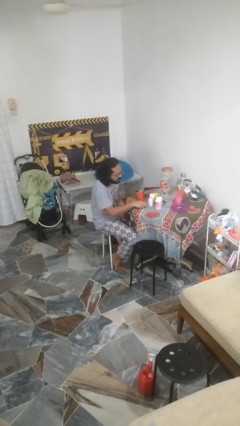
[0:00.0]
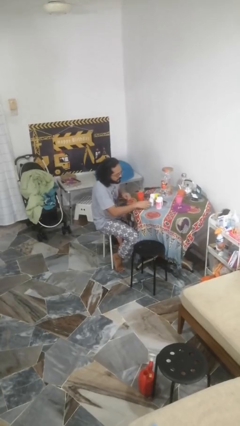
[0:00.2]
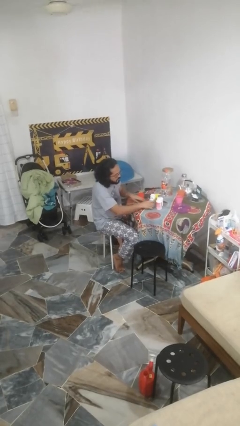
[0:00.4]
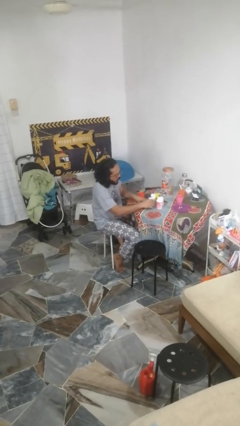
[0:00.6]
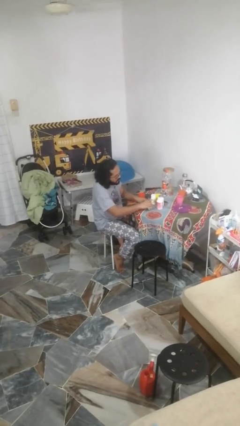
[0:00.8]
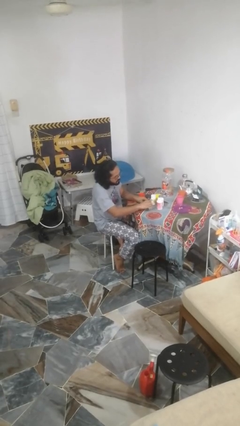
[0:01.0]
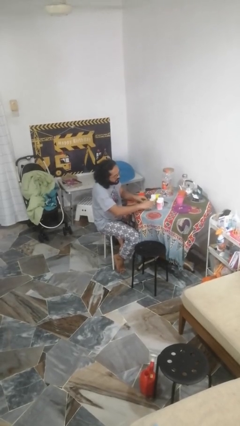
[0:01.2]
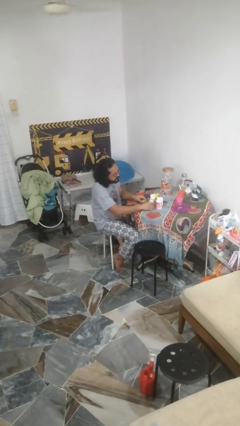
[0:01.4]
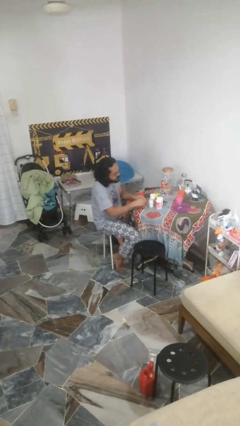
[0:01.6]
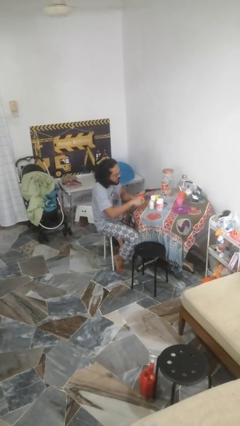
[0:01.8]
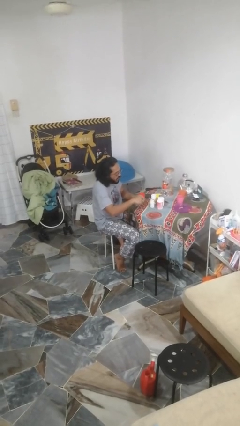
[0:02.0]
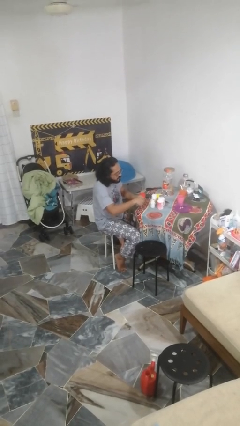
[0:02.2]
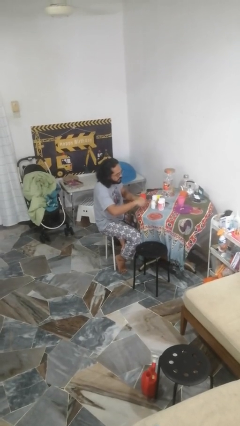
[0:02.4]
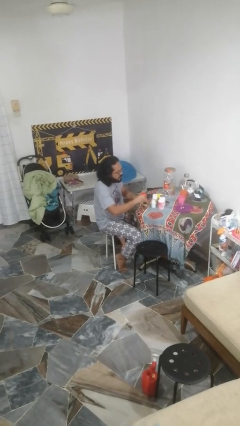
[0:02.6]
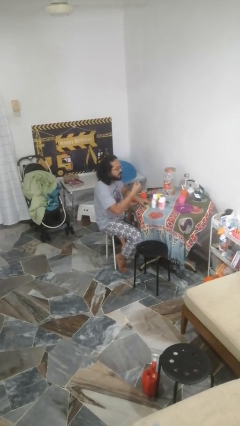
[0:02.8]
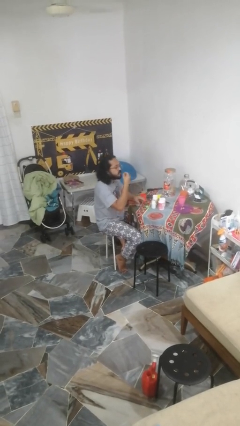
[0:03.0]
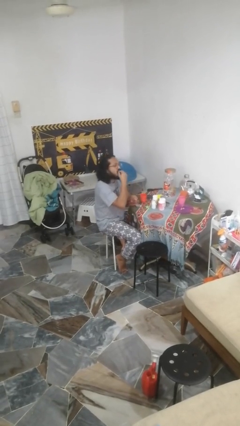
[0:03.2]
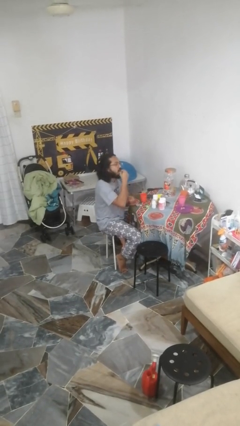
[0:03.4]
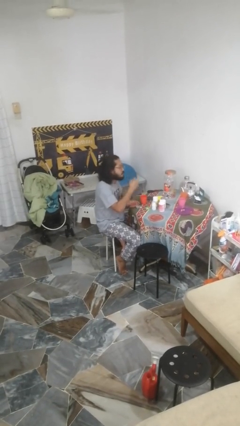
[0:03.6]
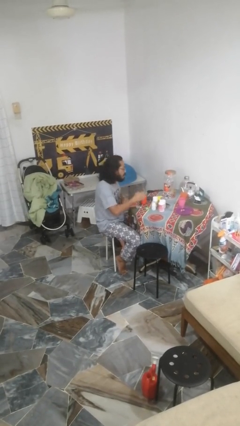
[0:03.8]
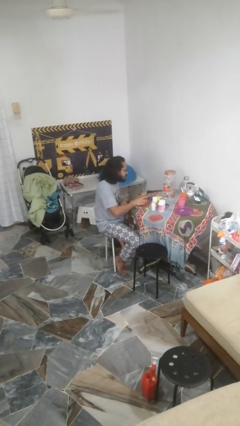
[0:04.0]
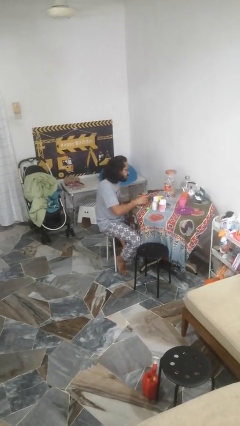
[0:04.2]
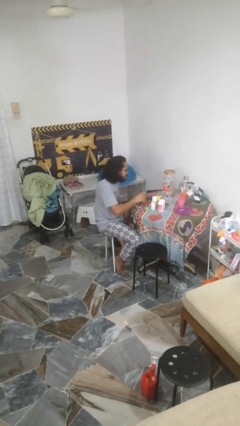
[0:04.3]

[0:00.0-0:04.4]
person takes medicine pills

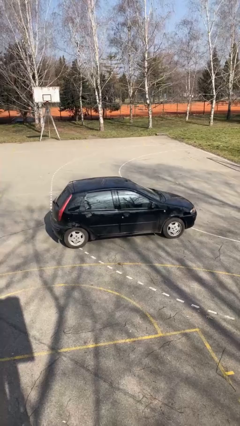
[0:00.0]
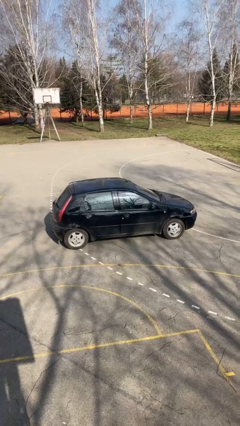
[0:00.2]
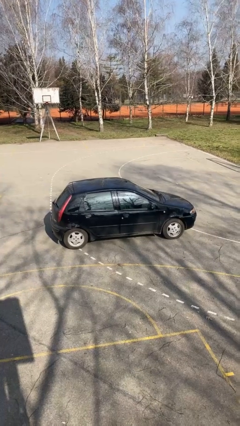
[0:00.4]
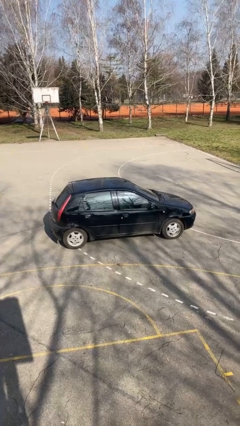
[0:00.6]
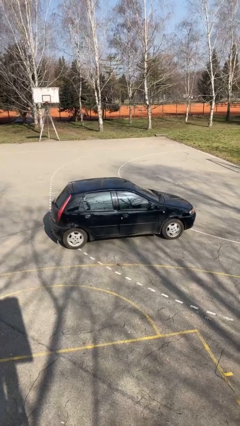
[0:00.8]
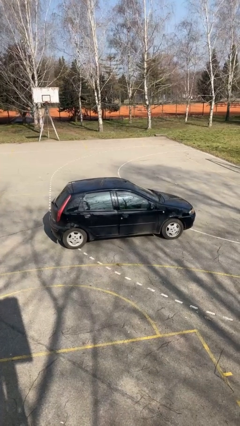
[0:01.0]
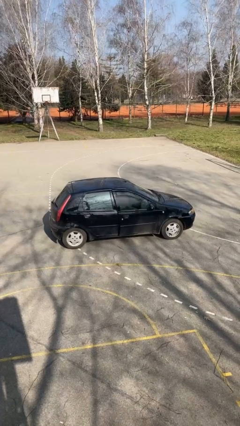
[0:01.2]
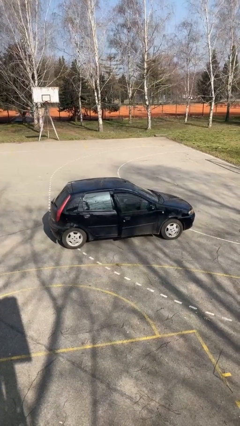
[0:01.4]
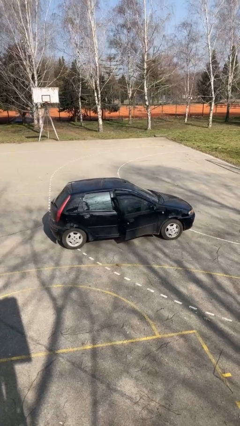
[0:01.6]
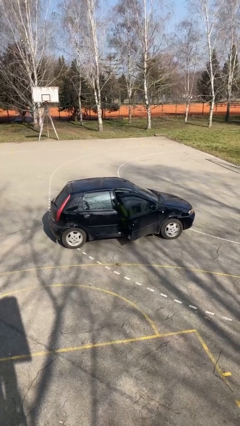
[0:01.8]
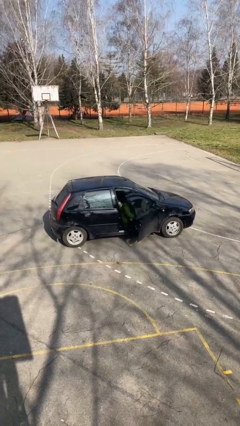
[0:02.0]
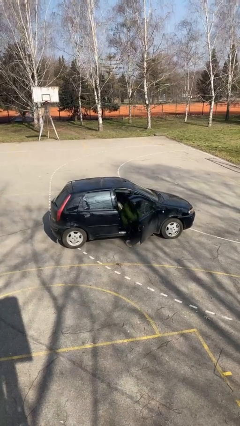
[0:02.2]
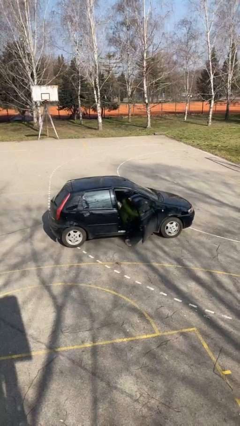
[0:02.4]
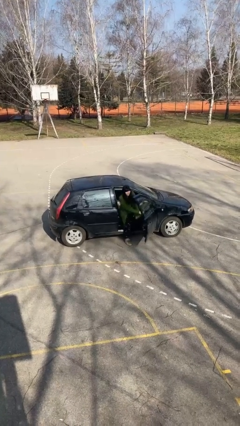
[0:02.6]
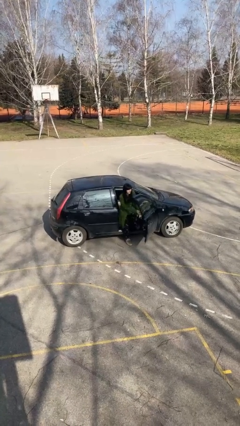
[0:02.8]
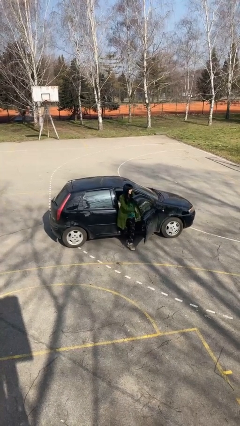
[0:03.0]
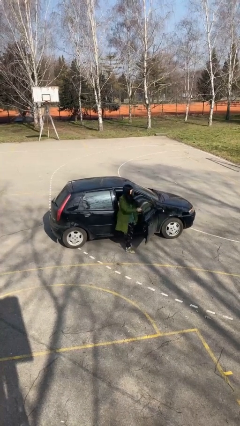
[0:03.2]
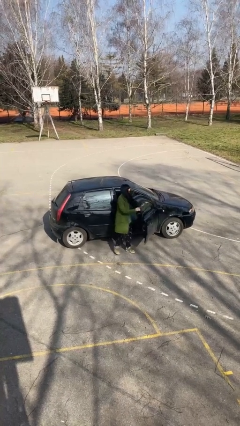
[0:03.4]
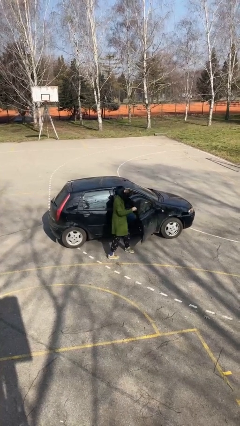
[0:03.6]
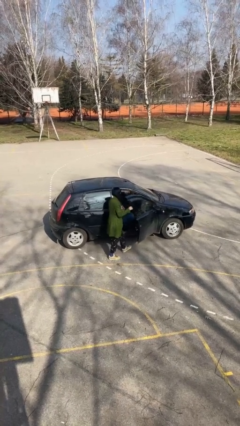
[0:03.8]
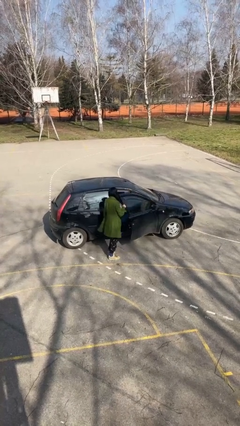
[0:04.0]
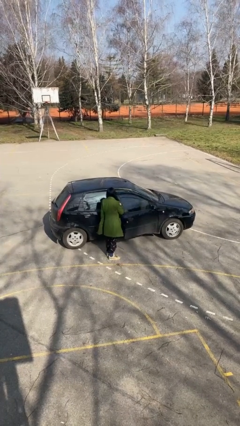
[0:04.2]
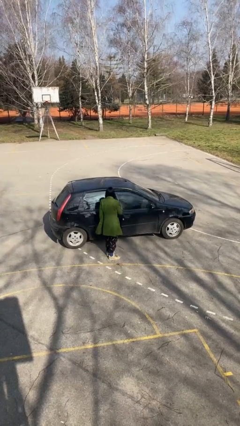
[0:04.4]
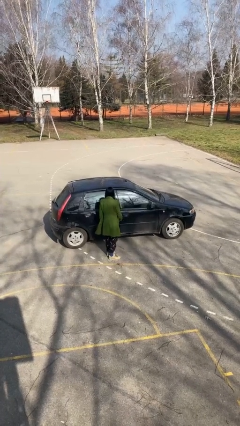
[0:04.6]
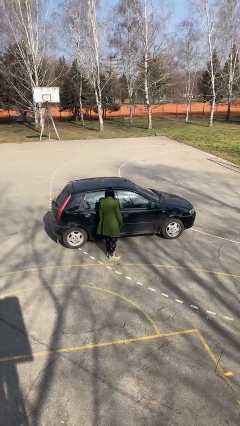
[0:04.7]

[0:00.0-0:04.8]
car drops off person

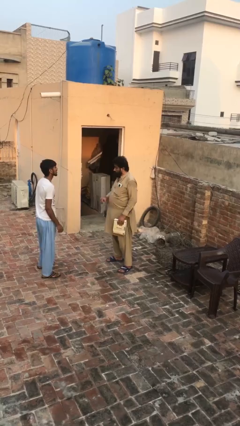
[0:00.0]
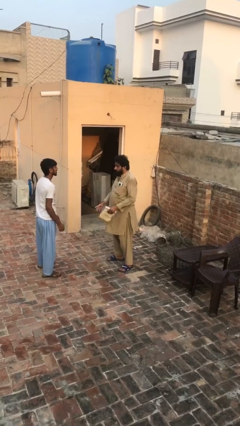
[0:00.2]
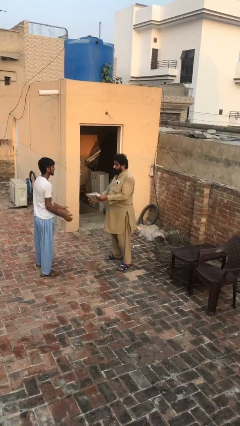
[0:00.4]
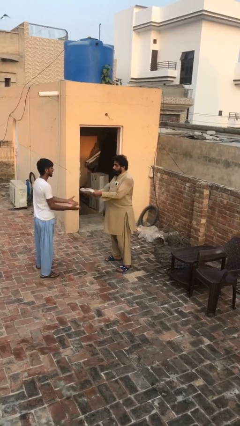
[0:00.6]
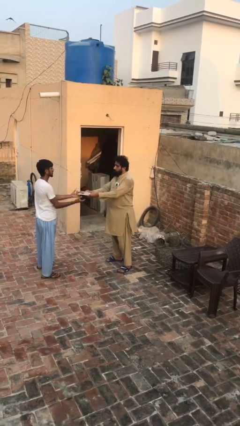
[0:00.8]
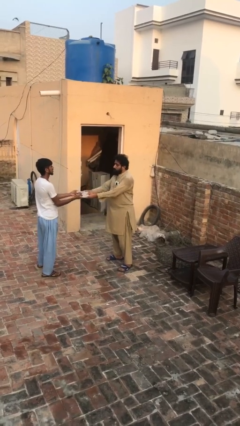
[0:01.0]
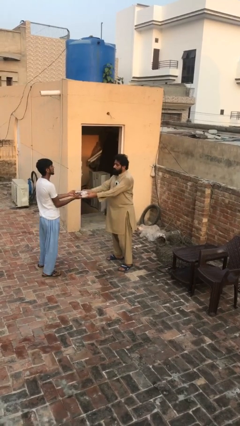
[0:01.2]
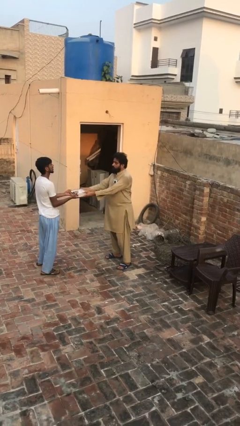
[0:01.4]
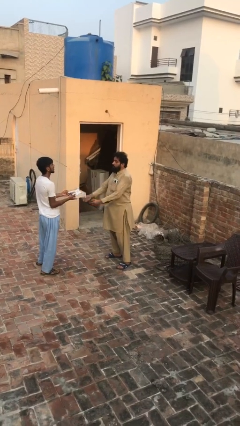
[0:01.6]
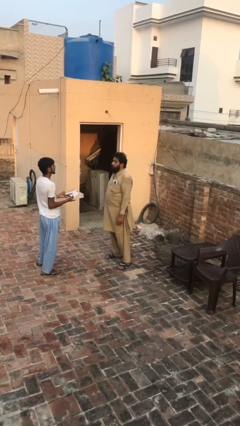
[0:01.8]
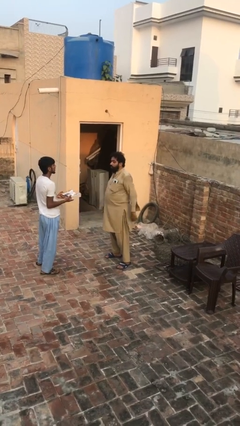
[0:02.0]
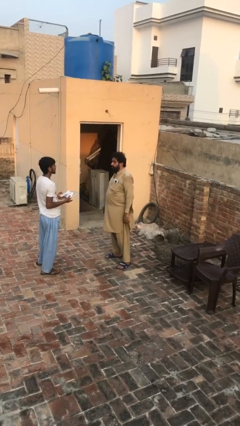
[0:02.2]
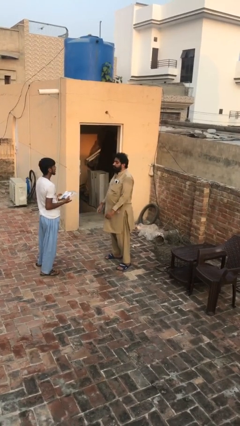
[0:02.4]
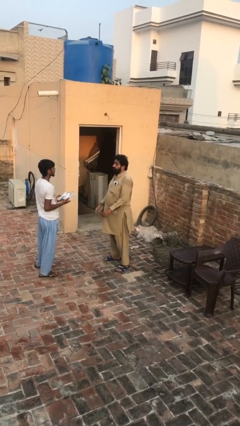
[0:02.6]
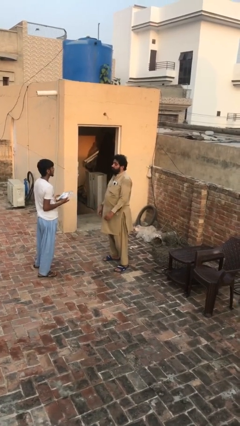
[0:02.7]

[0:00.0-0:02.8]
person transfers object to person

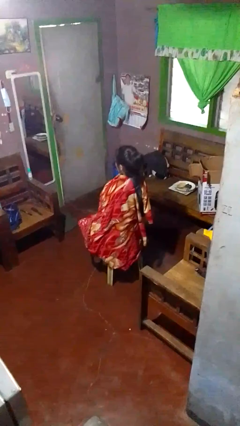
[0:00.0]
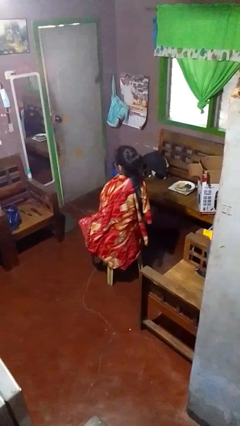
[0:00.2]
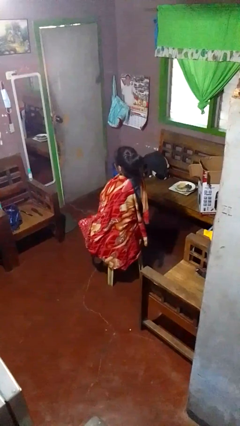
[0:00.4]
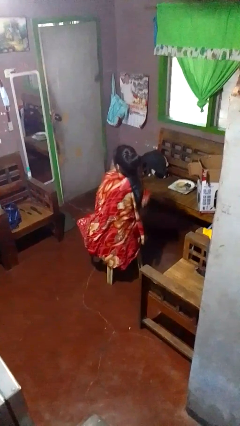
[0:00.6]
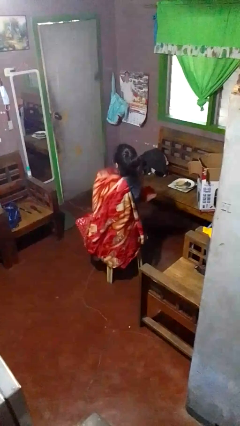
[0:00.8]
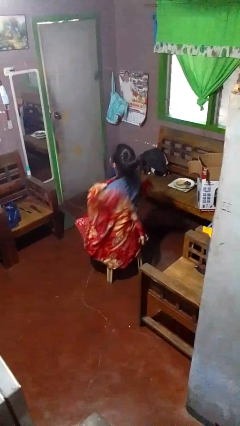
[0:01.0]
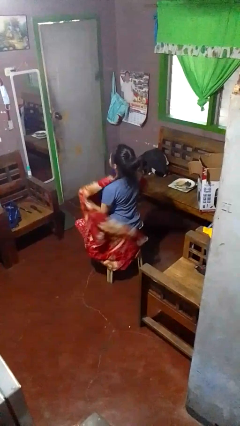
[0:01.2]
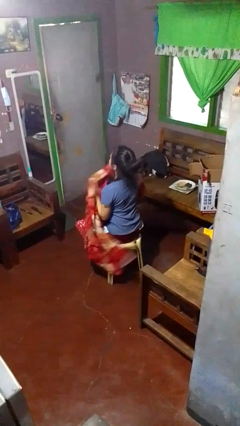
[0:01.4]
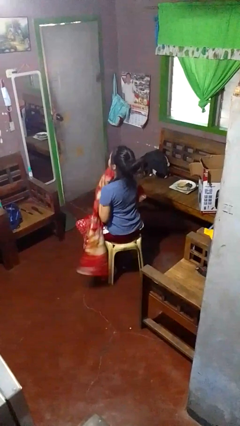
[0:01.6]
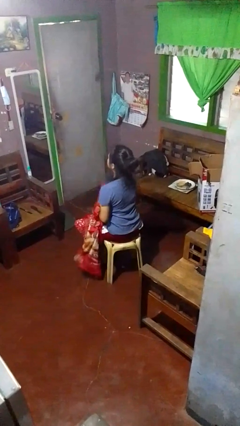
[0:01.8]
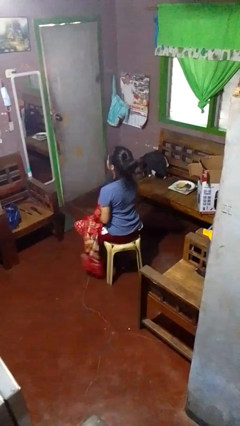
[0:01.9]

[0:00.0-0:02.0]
person uncovers with blanket

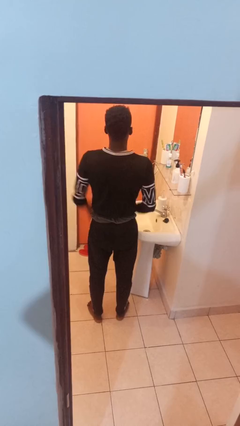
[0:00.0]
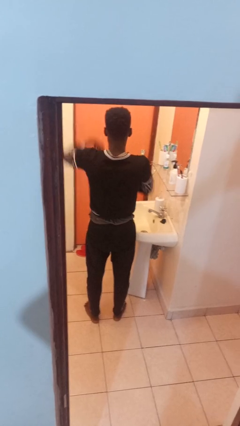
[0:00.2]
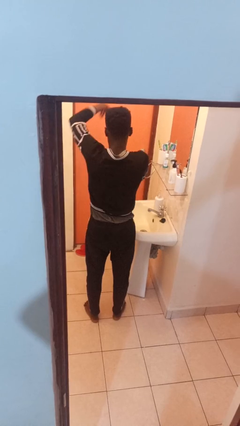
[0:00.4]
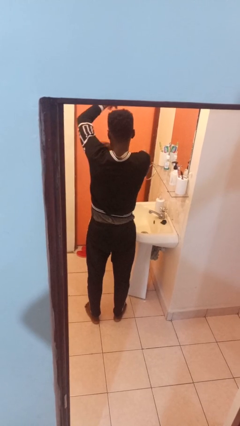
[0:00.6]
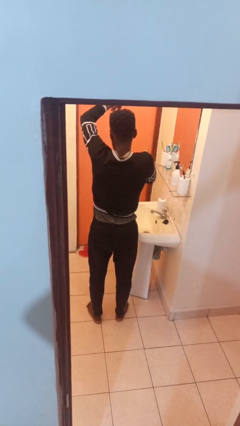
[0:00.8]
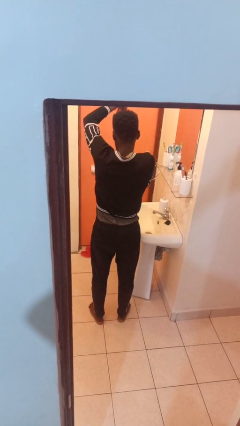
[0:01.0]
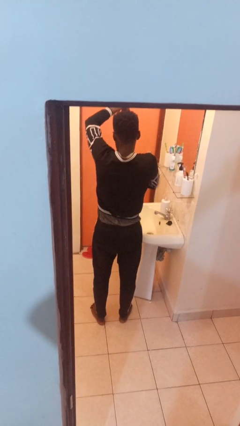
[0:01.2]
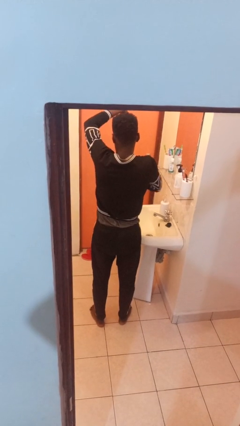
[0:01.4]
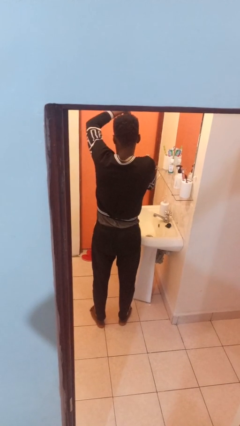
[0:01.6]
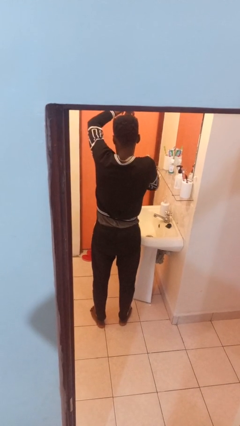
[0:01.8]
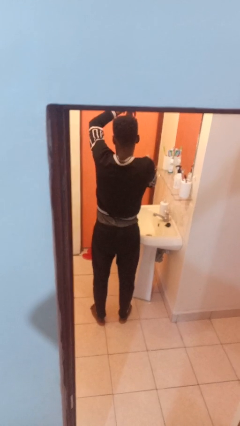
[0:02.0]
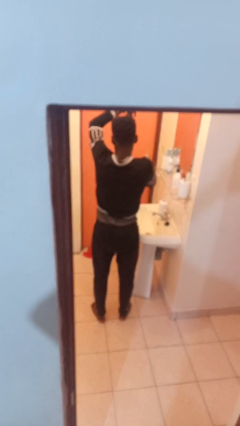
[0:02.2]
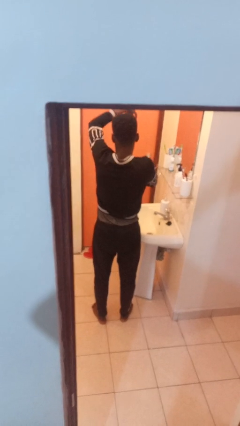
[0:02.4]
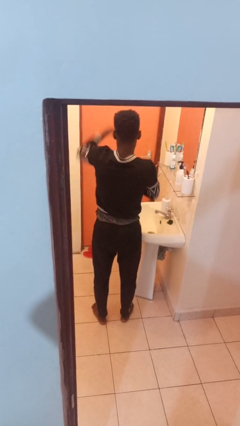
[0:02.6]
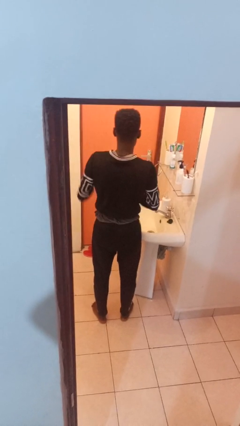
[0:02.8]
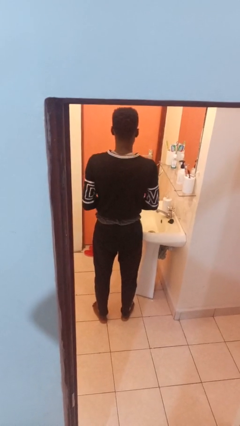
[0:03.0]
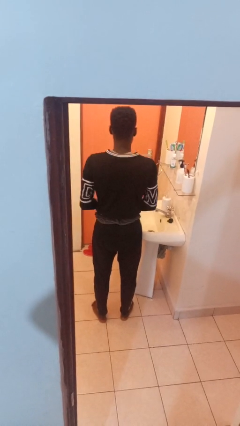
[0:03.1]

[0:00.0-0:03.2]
person applies deodorant

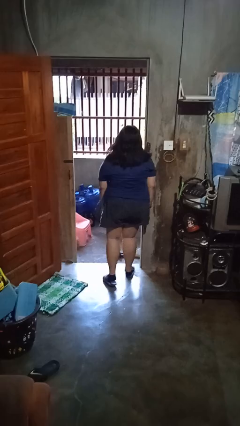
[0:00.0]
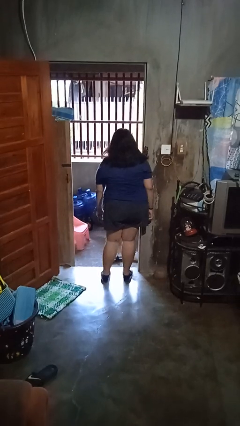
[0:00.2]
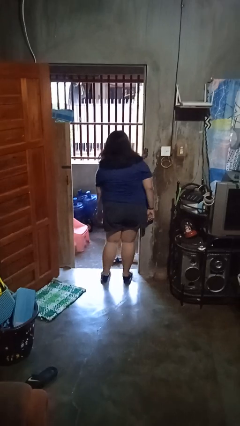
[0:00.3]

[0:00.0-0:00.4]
person bumps into wall
